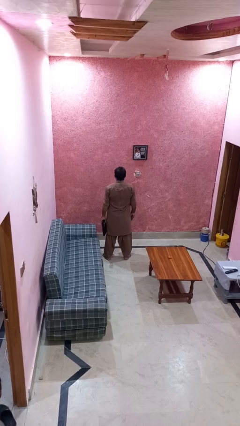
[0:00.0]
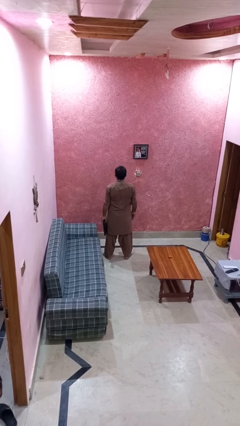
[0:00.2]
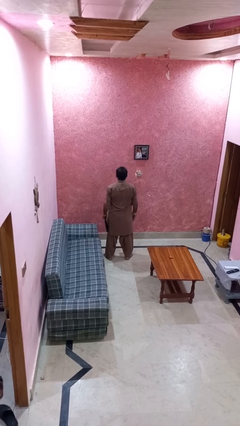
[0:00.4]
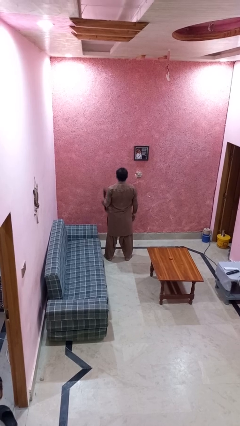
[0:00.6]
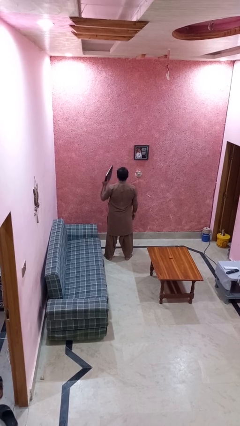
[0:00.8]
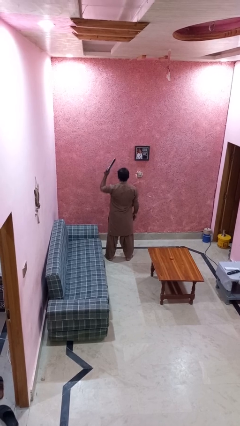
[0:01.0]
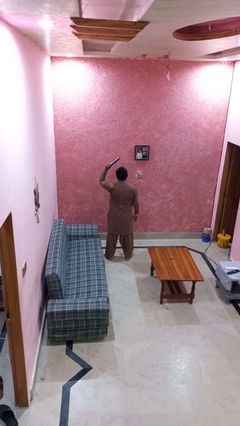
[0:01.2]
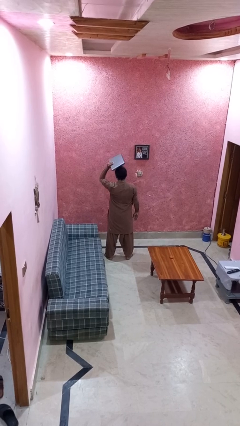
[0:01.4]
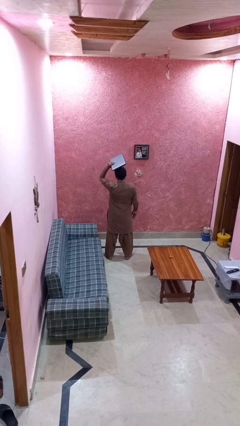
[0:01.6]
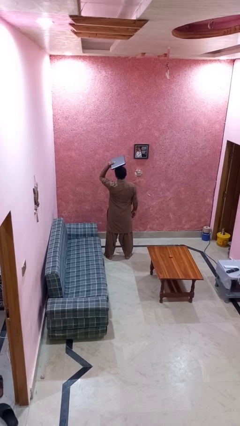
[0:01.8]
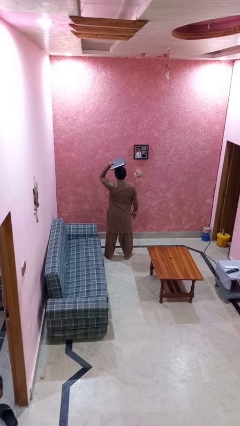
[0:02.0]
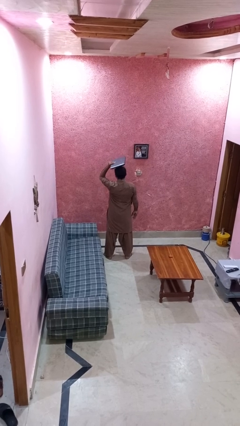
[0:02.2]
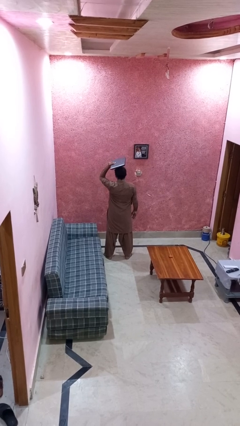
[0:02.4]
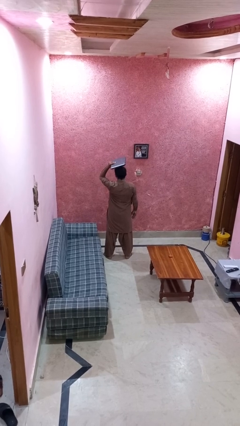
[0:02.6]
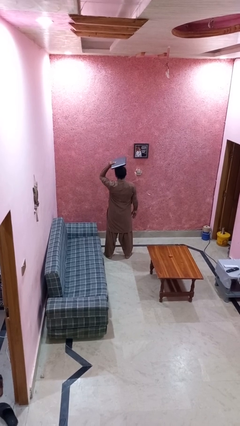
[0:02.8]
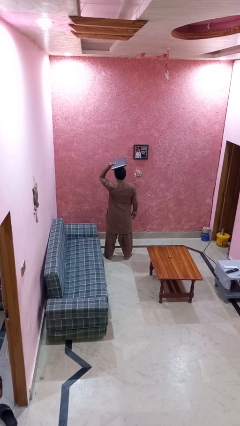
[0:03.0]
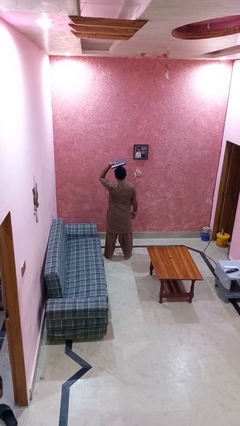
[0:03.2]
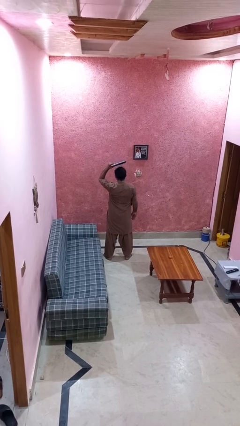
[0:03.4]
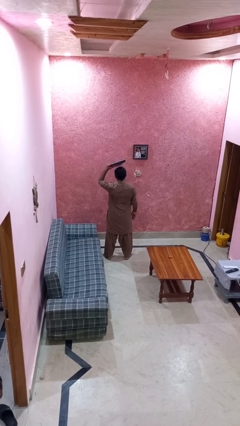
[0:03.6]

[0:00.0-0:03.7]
person holds object above head

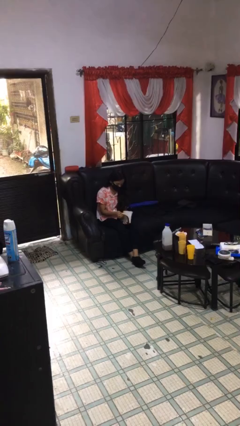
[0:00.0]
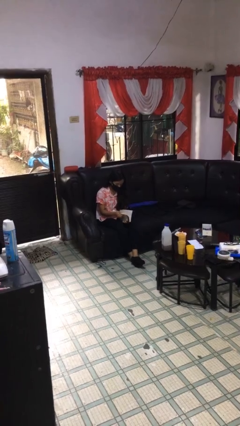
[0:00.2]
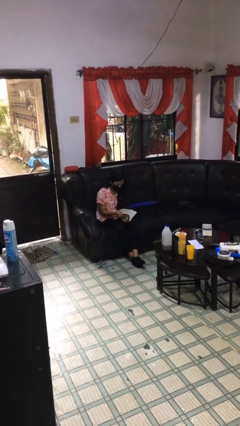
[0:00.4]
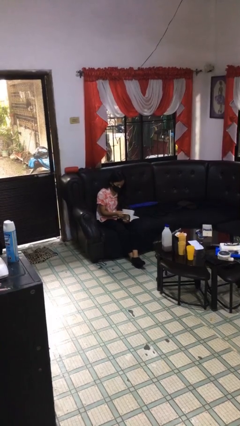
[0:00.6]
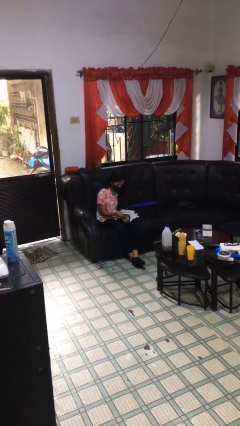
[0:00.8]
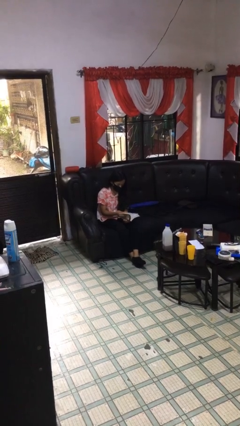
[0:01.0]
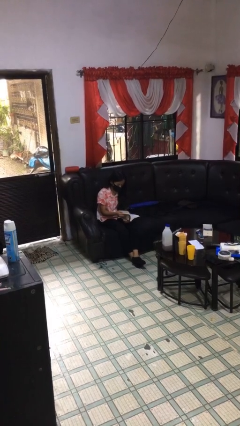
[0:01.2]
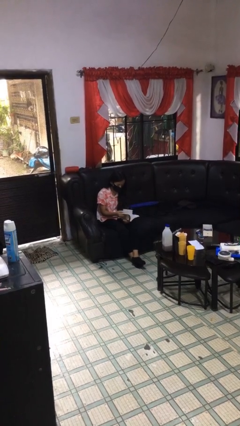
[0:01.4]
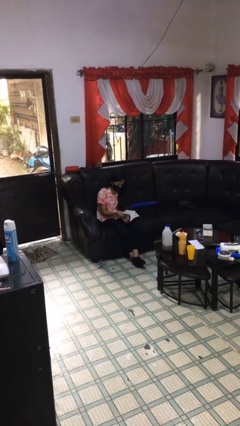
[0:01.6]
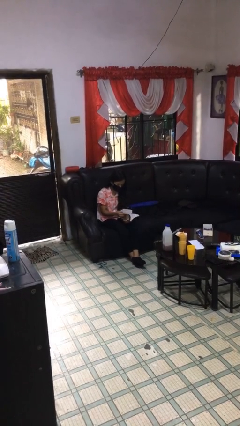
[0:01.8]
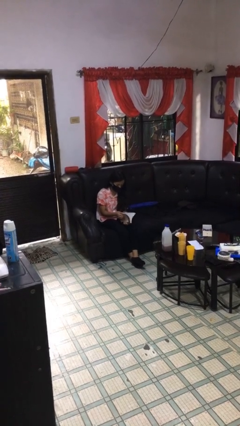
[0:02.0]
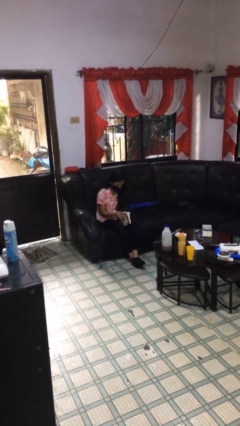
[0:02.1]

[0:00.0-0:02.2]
person reads document

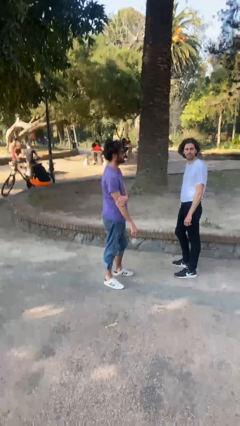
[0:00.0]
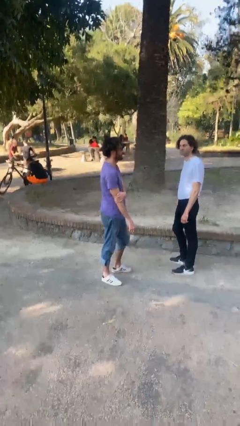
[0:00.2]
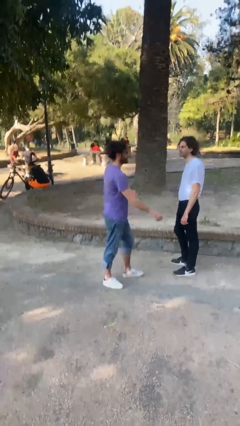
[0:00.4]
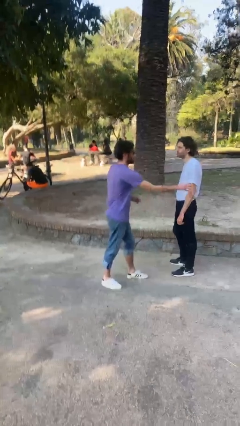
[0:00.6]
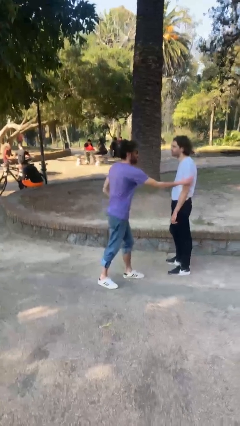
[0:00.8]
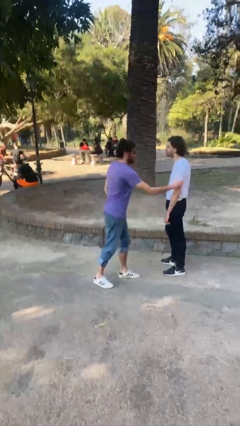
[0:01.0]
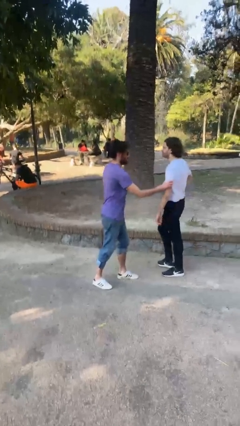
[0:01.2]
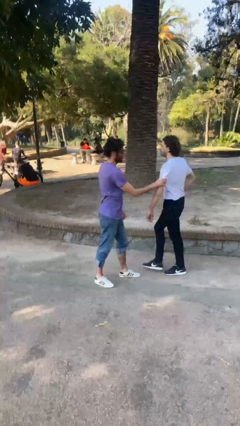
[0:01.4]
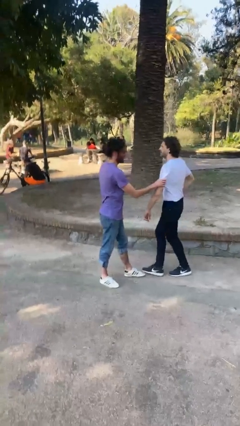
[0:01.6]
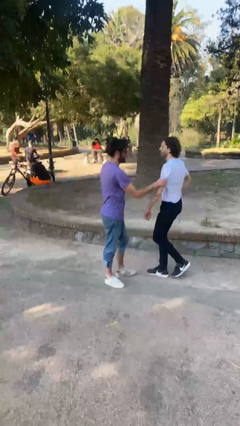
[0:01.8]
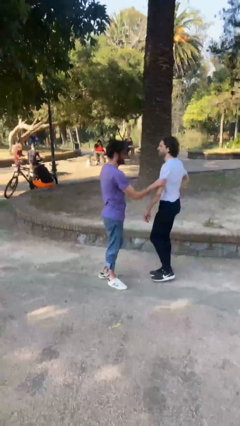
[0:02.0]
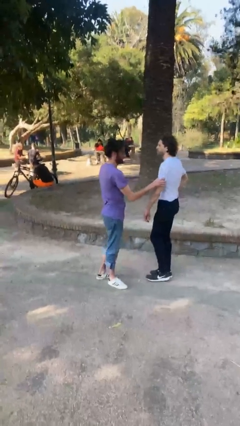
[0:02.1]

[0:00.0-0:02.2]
person grabs person by bicep

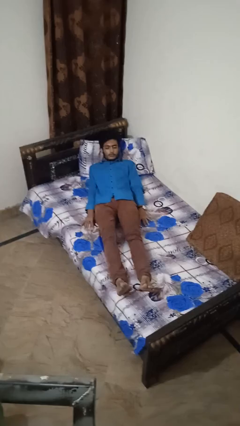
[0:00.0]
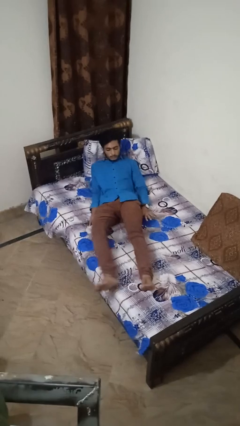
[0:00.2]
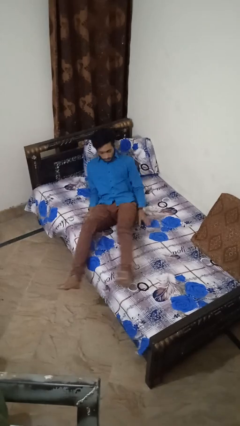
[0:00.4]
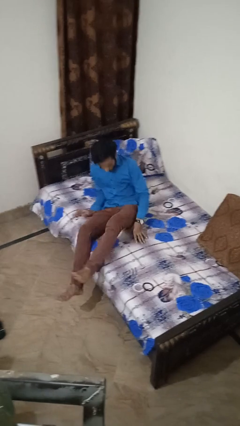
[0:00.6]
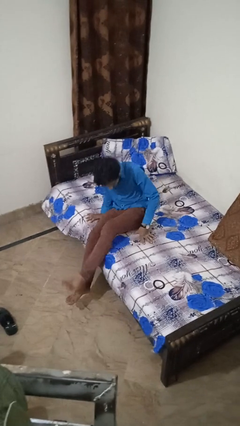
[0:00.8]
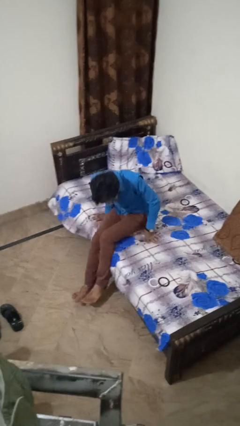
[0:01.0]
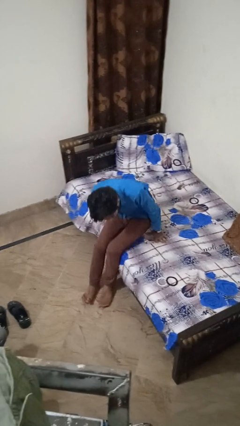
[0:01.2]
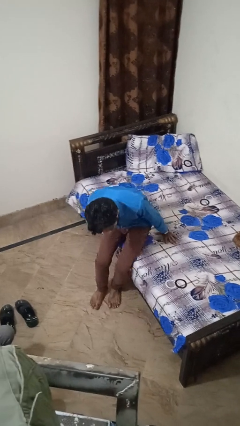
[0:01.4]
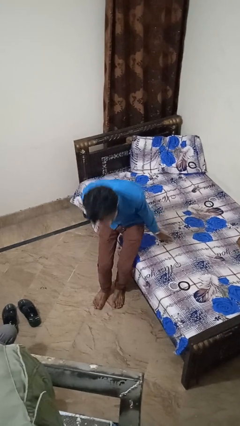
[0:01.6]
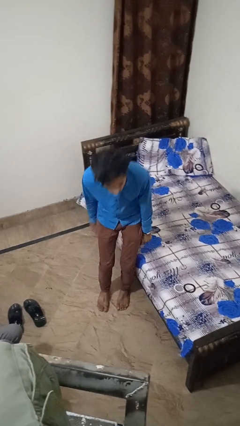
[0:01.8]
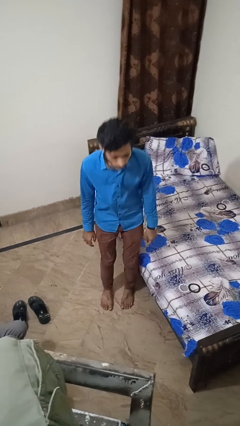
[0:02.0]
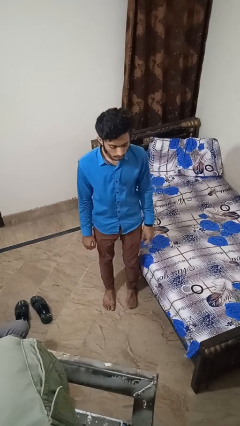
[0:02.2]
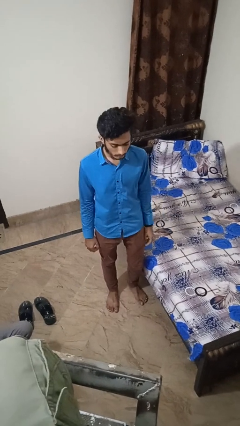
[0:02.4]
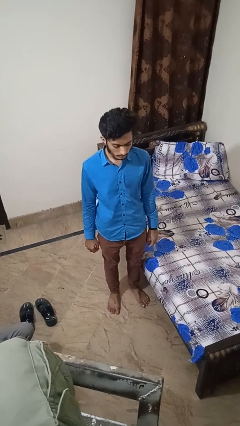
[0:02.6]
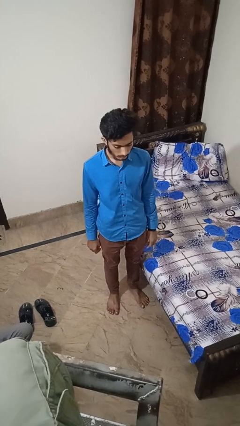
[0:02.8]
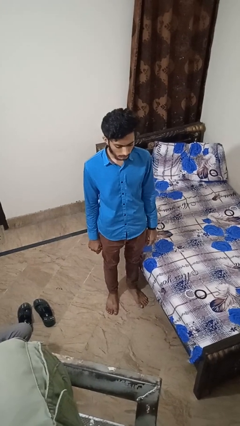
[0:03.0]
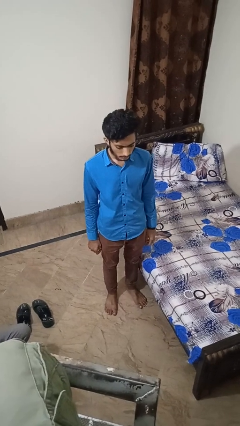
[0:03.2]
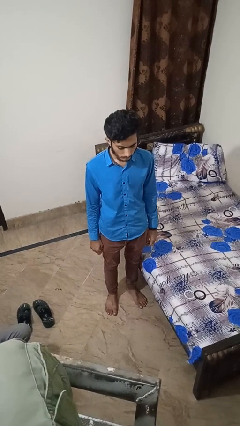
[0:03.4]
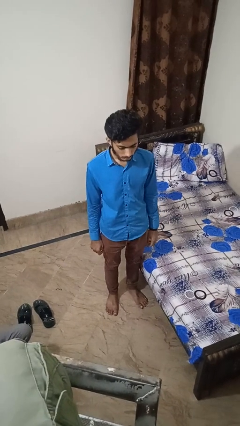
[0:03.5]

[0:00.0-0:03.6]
person stands up

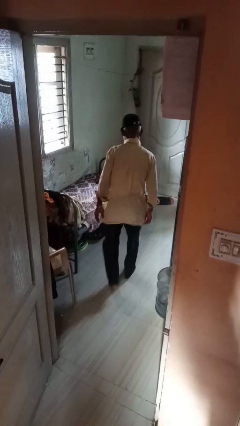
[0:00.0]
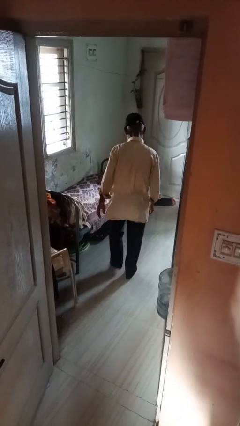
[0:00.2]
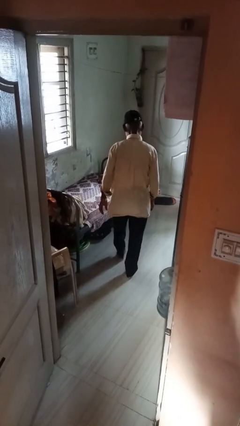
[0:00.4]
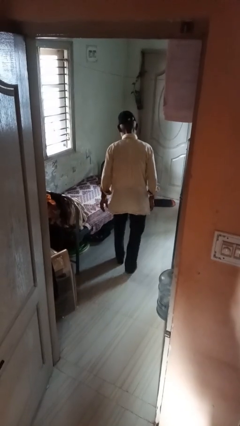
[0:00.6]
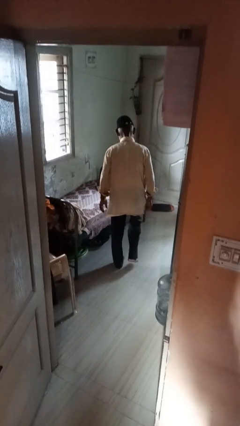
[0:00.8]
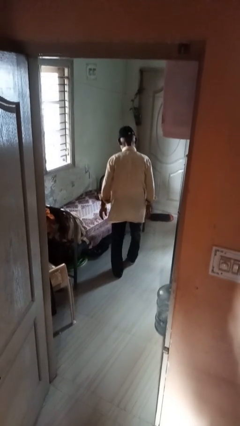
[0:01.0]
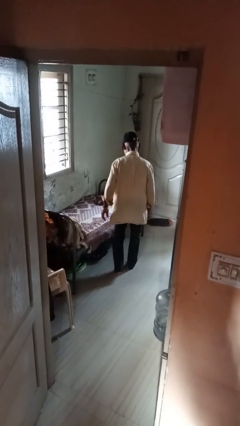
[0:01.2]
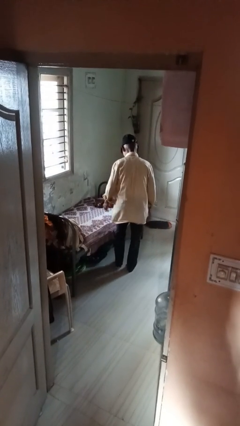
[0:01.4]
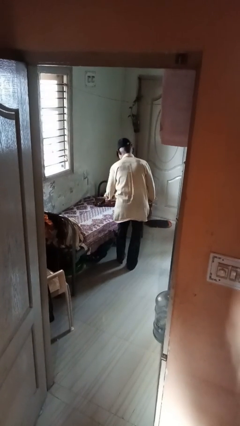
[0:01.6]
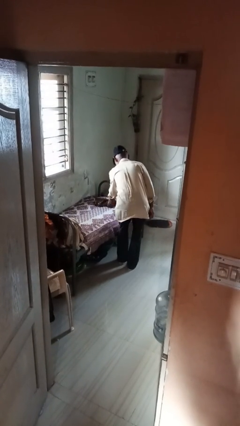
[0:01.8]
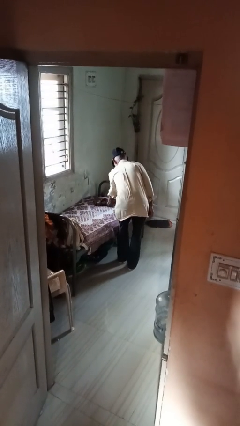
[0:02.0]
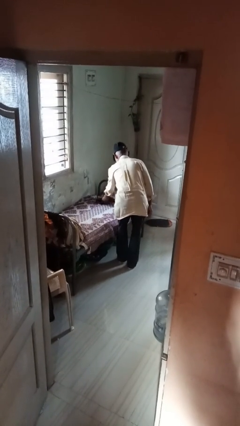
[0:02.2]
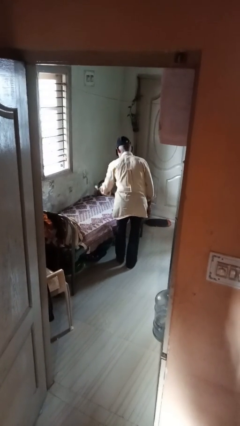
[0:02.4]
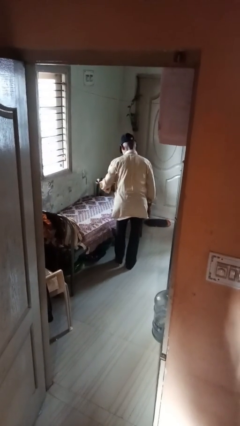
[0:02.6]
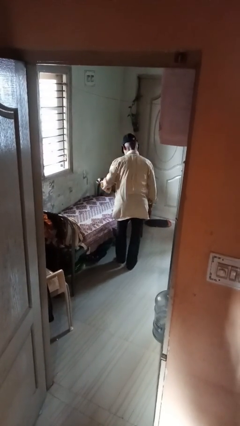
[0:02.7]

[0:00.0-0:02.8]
person picks up object from bed

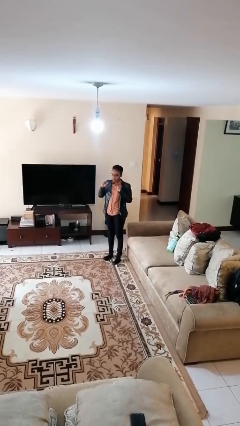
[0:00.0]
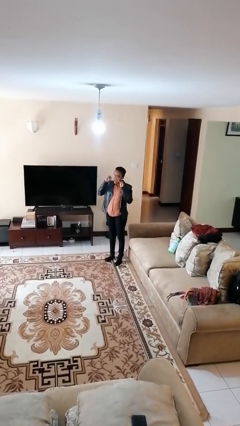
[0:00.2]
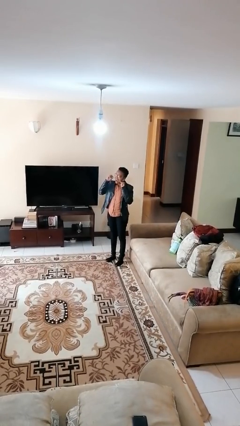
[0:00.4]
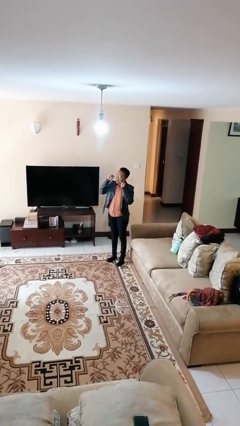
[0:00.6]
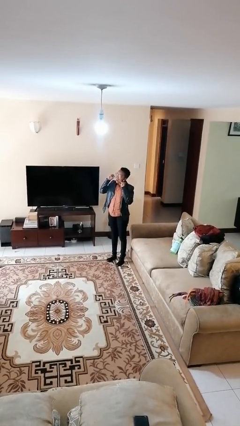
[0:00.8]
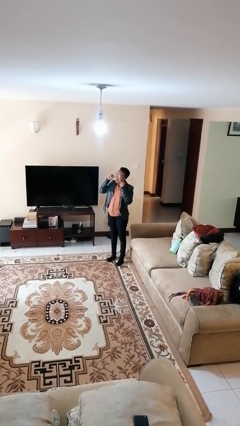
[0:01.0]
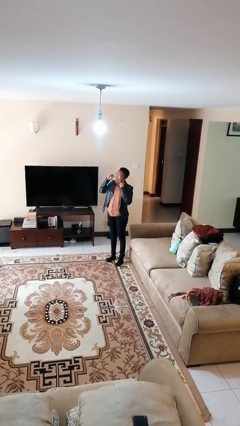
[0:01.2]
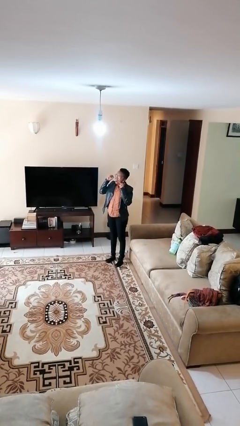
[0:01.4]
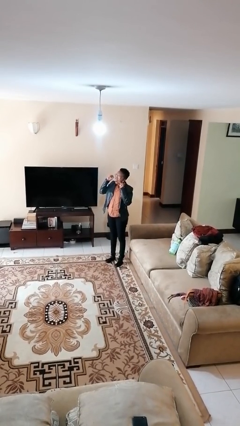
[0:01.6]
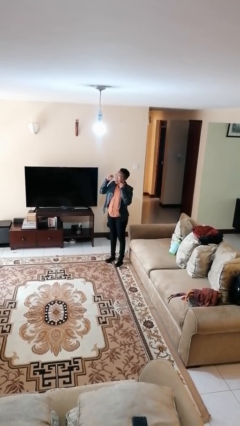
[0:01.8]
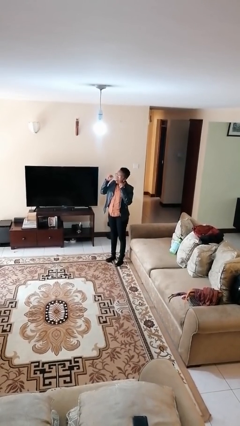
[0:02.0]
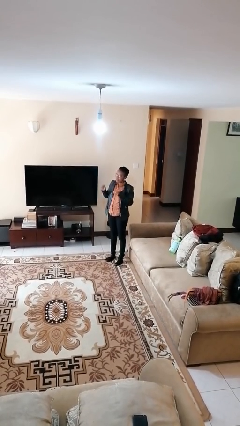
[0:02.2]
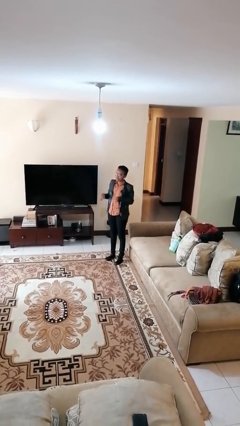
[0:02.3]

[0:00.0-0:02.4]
person flosses

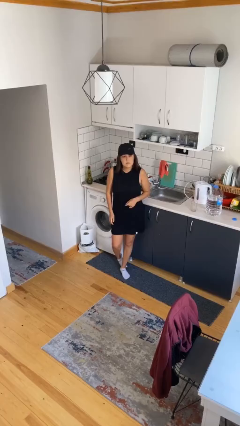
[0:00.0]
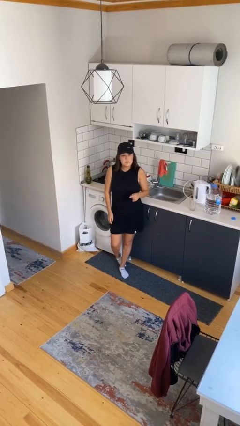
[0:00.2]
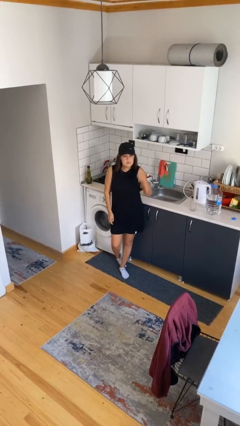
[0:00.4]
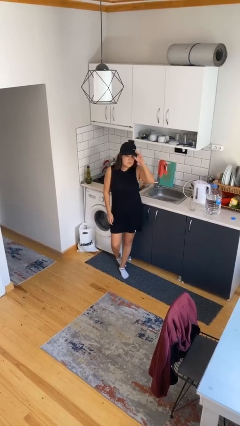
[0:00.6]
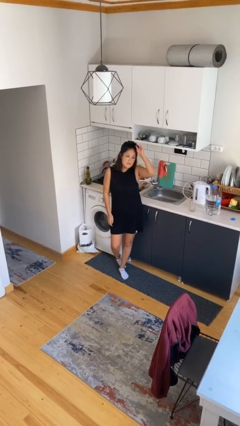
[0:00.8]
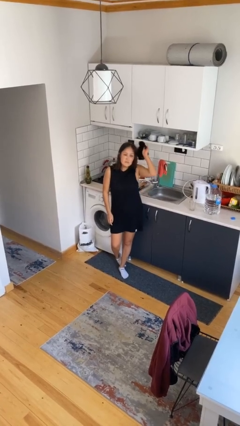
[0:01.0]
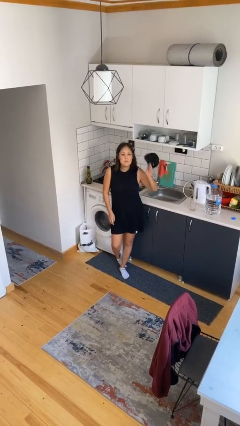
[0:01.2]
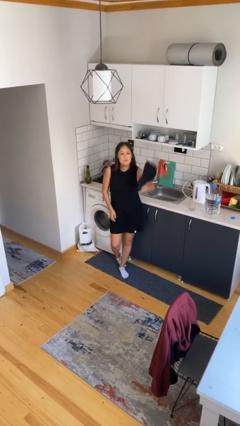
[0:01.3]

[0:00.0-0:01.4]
person takes off hat
